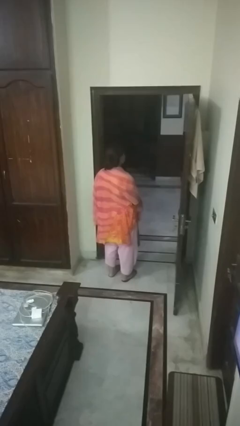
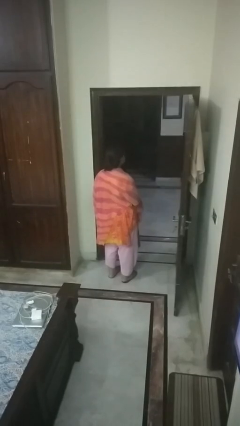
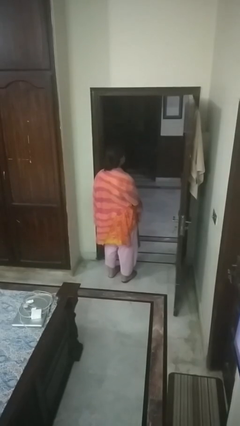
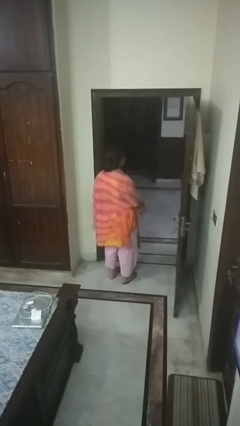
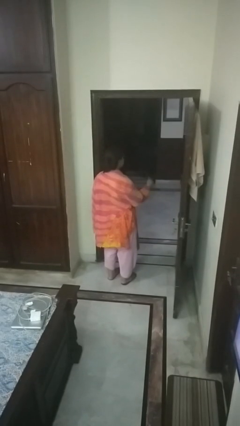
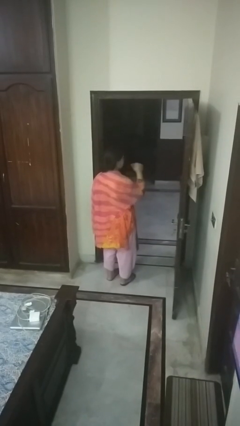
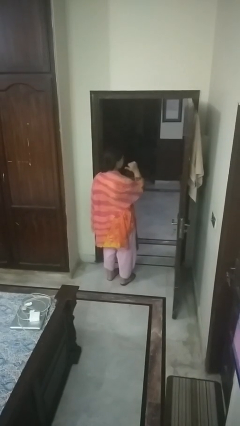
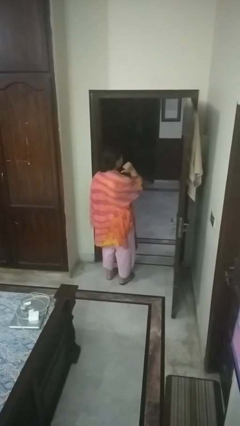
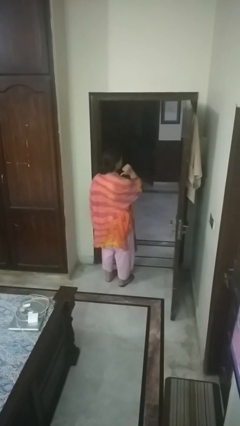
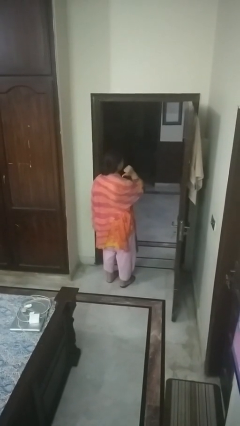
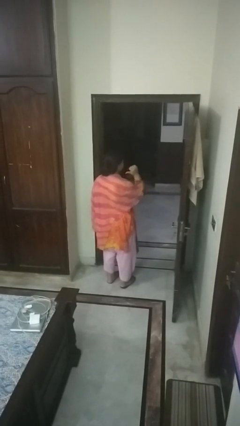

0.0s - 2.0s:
person gestures behind me

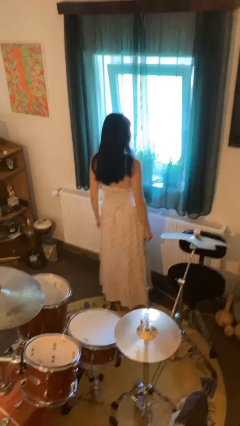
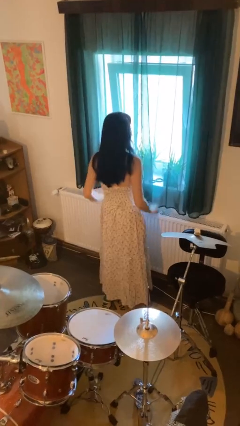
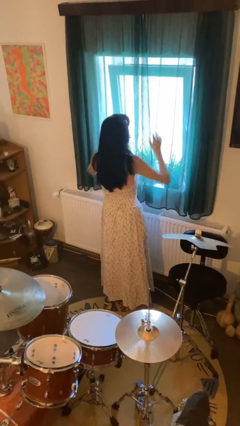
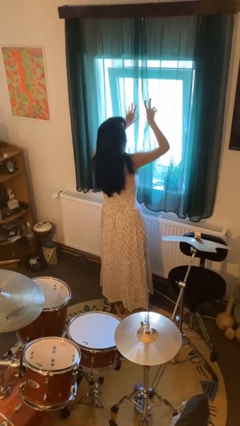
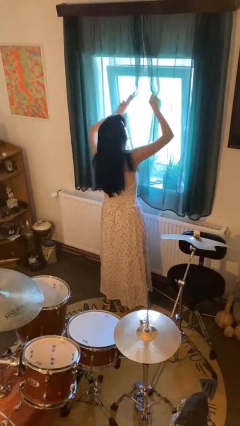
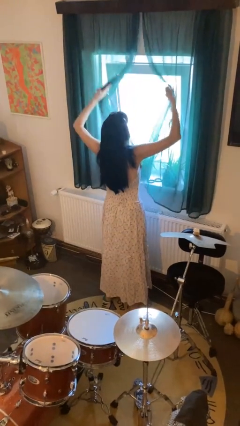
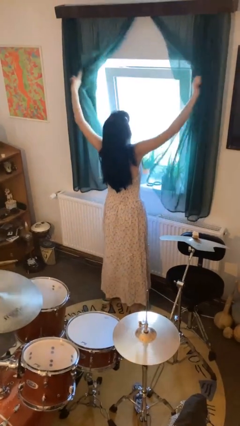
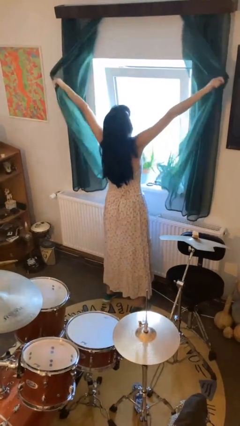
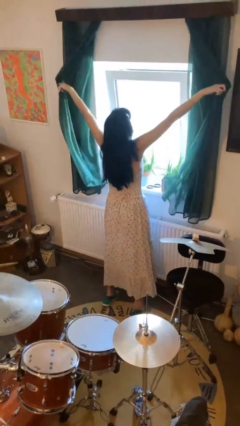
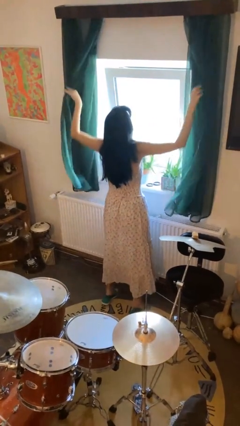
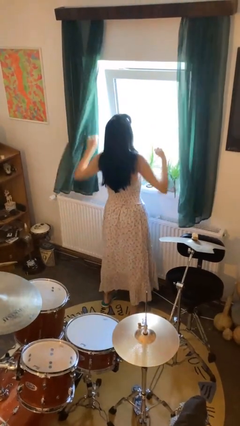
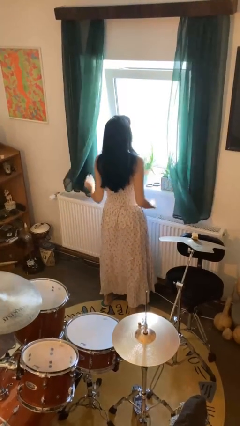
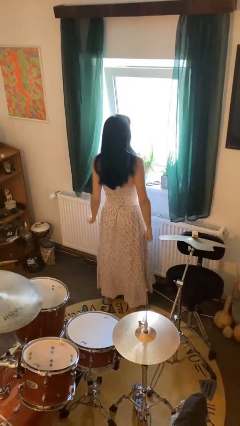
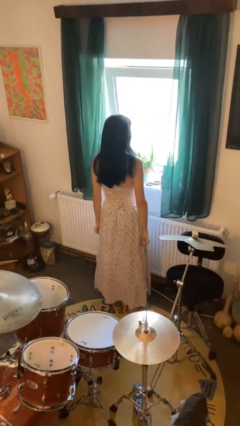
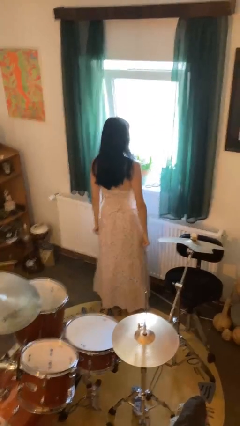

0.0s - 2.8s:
person opens curtains

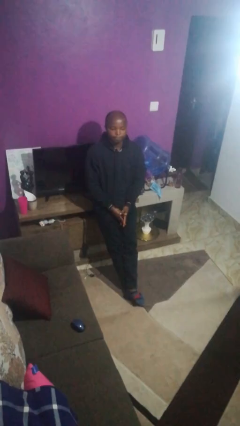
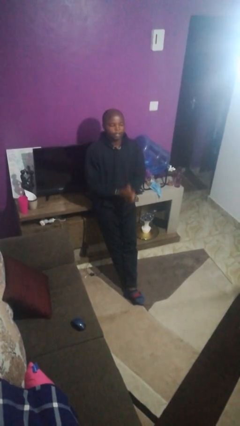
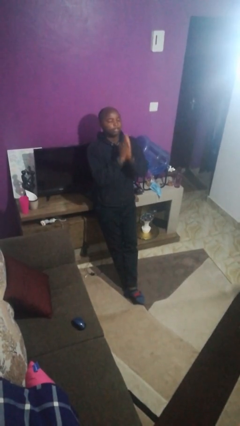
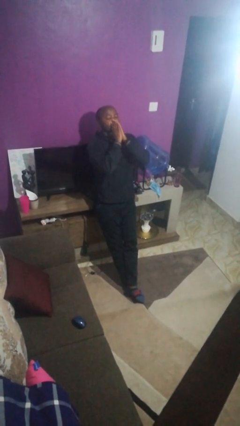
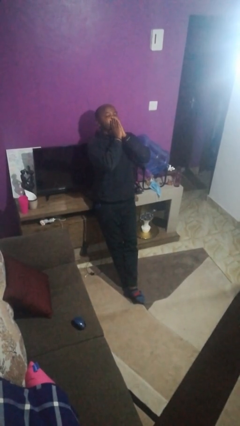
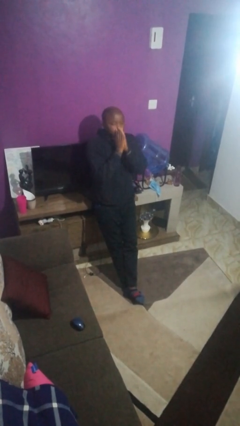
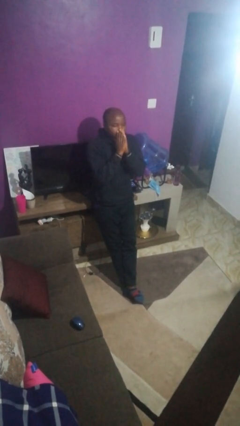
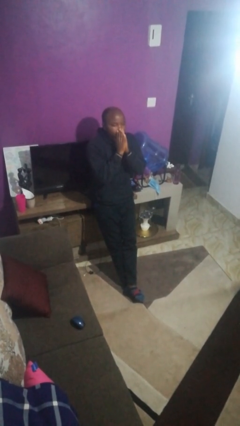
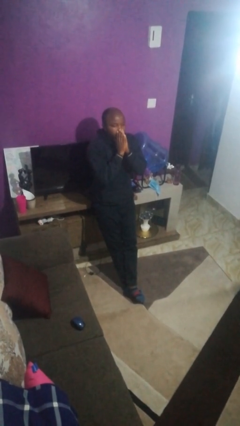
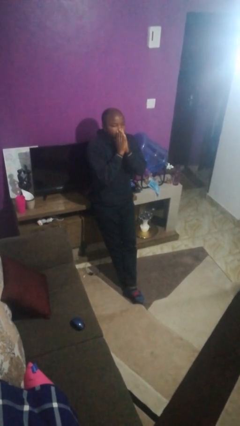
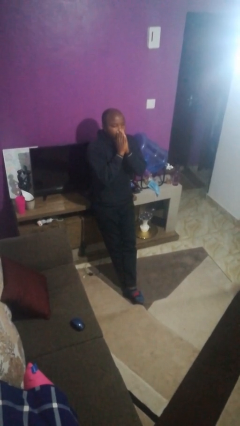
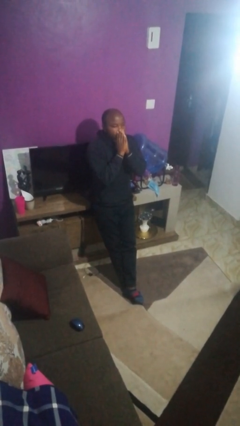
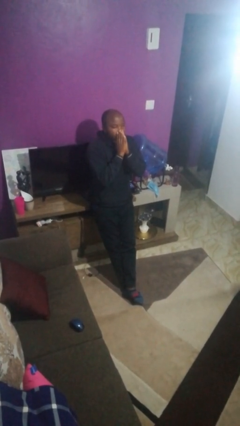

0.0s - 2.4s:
person sneezes into hand

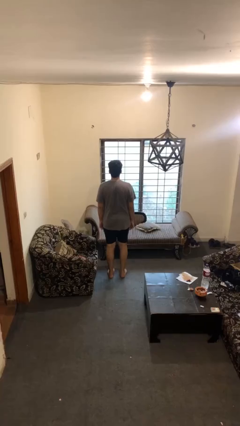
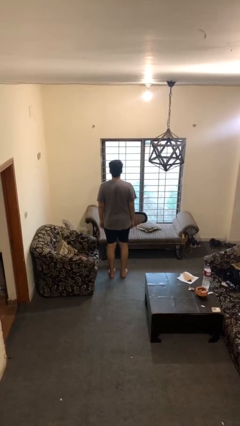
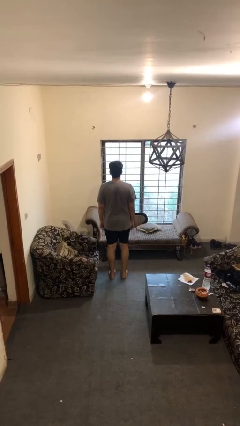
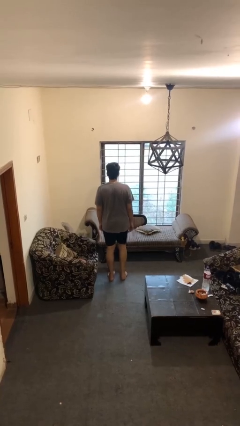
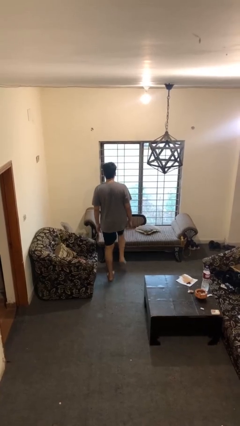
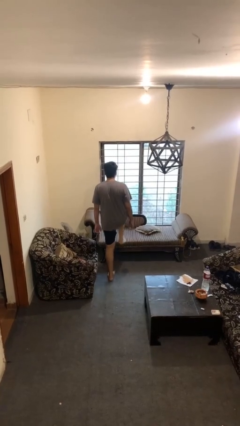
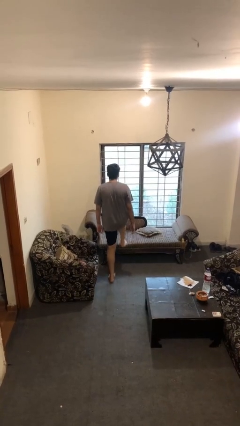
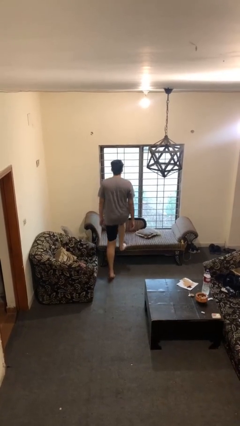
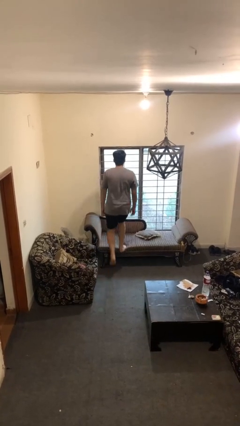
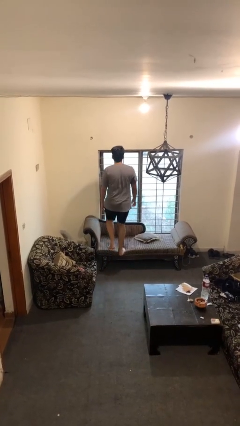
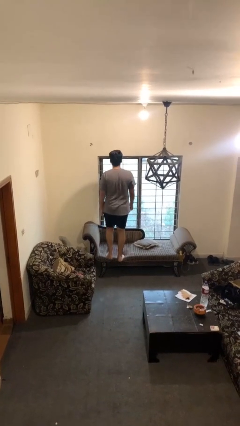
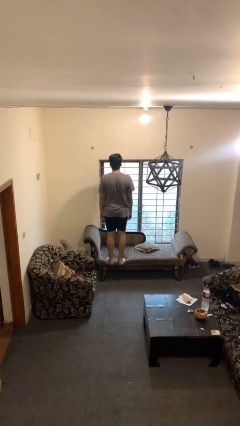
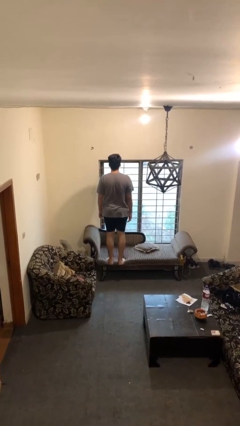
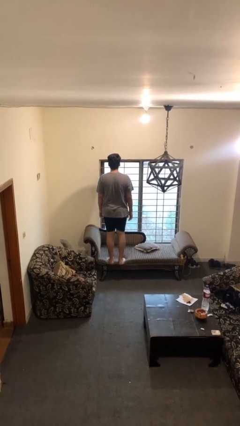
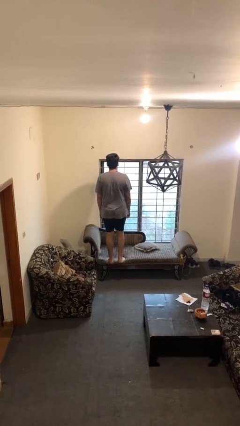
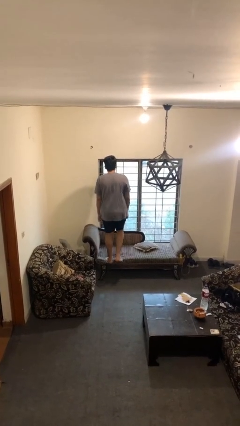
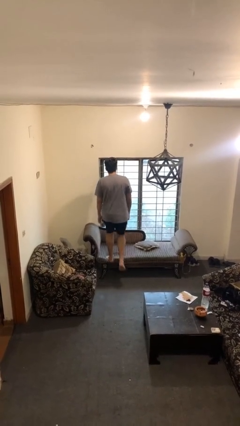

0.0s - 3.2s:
person climbs on couch

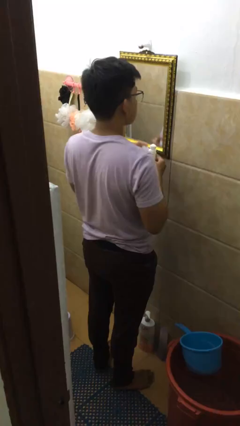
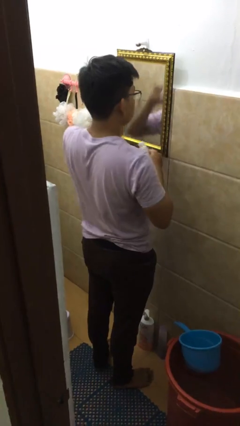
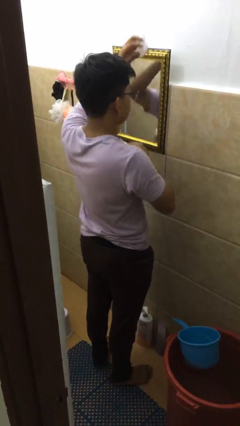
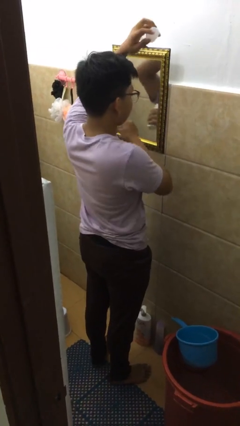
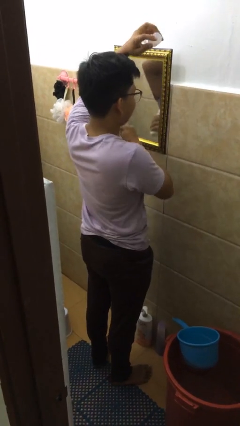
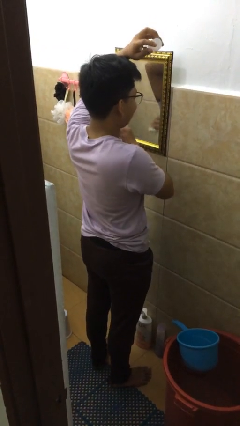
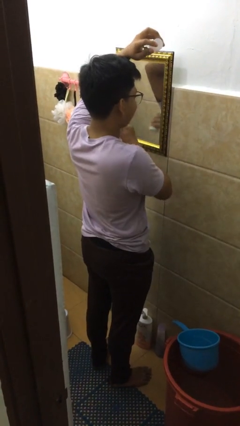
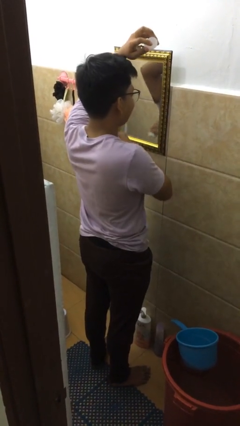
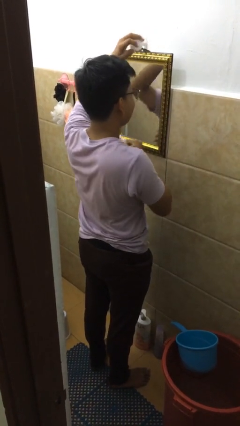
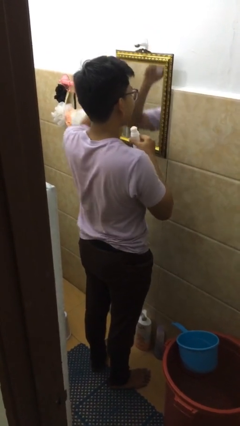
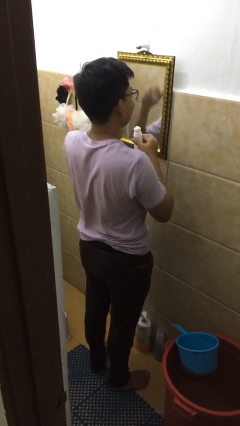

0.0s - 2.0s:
person applies deodorant

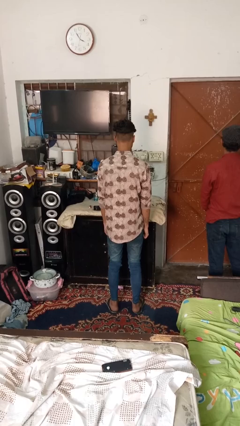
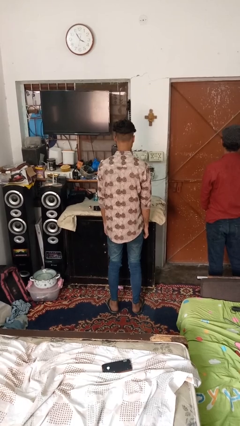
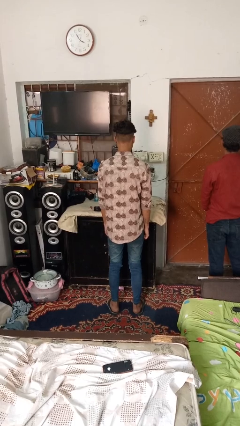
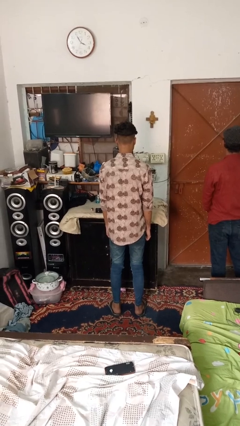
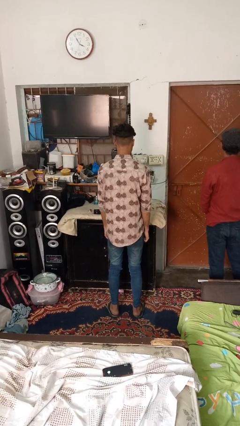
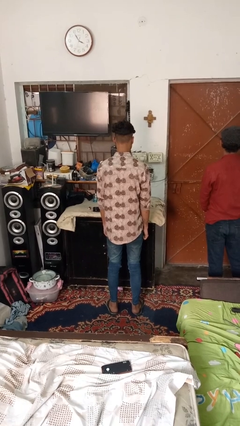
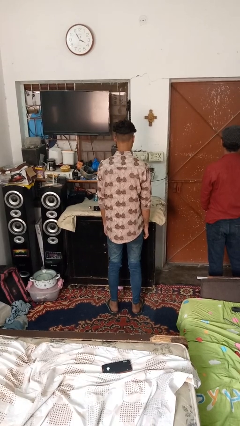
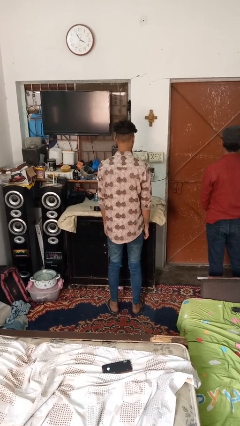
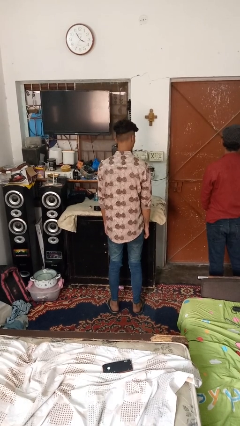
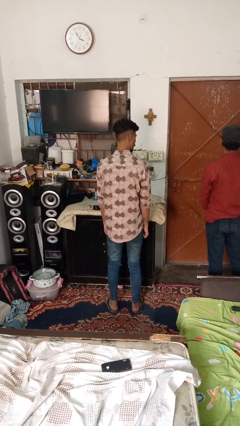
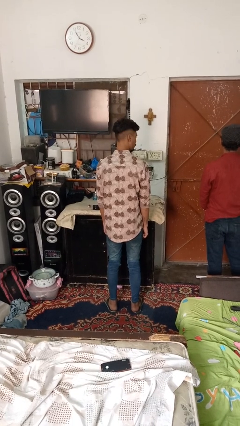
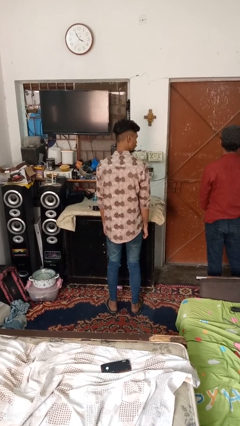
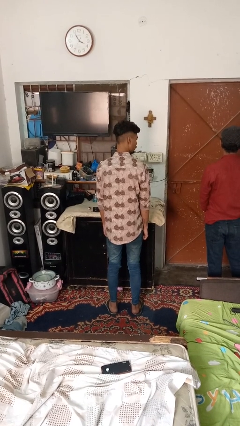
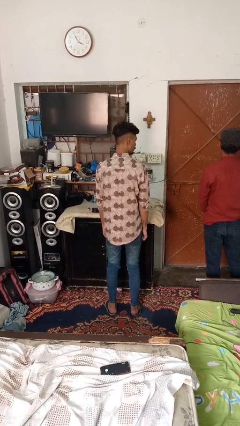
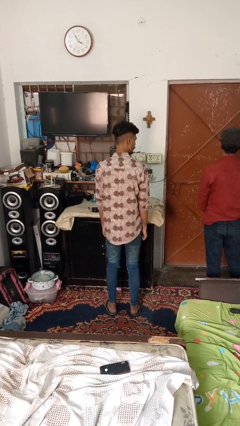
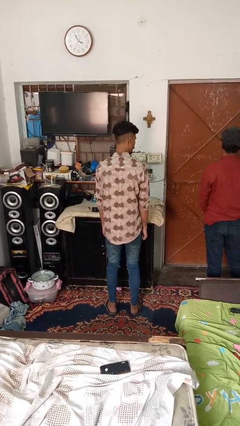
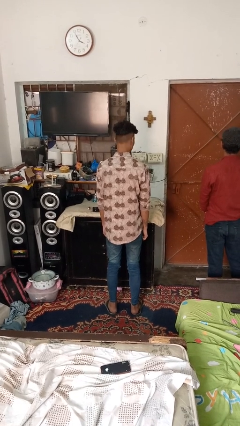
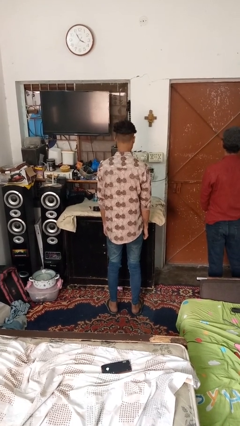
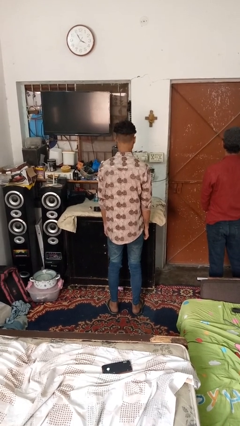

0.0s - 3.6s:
person looks over shoulder

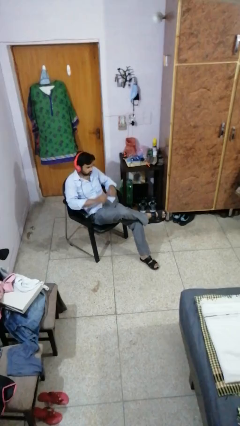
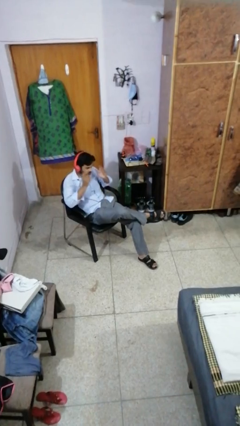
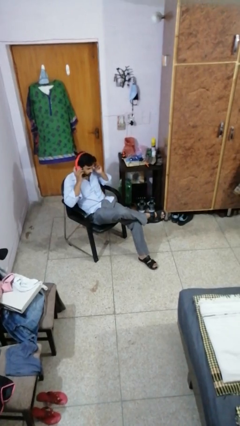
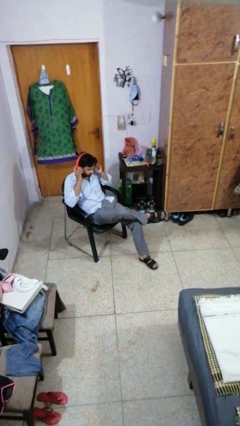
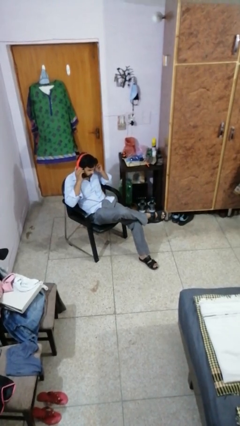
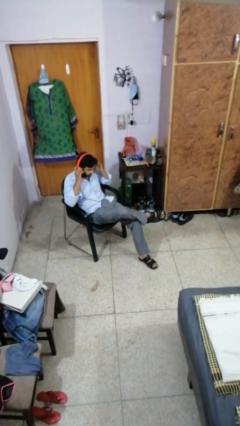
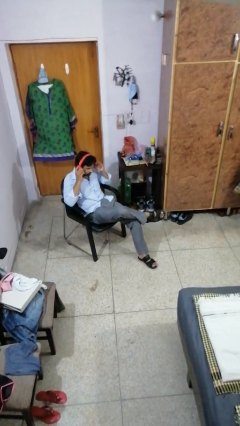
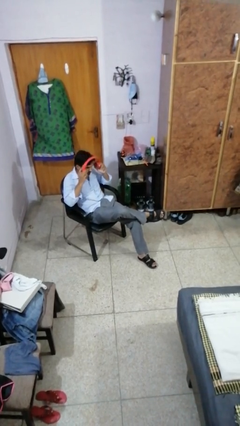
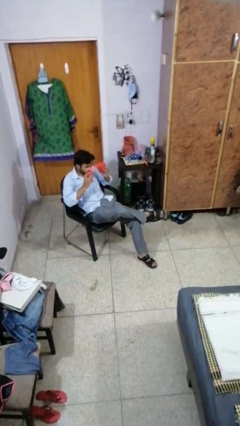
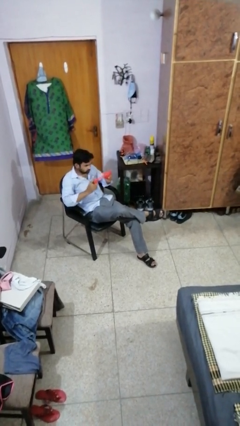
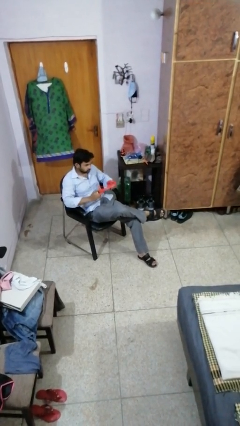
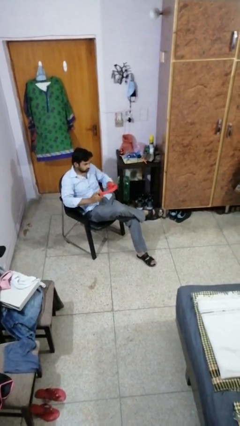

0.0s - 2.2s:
person takes off headphones
